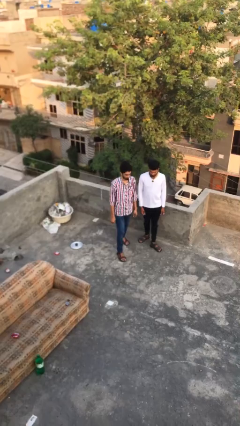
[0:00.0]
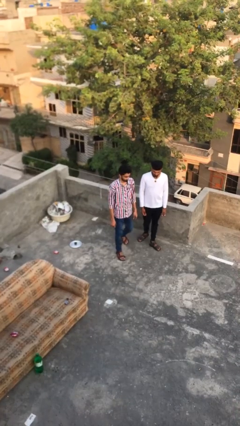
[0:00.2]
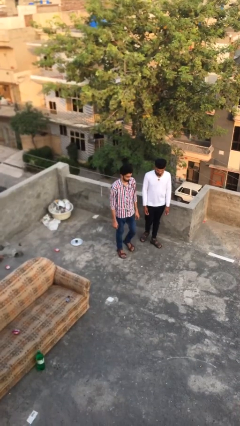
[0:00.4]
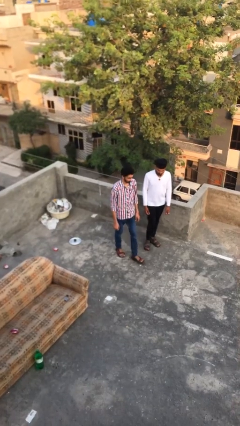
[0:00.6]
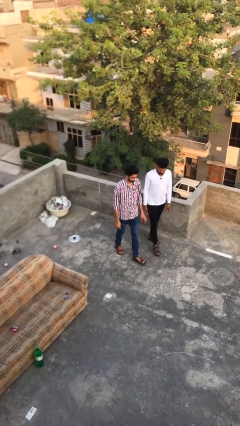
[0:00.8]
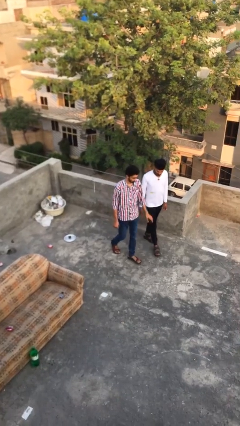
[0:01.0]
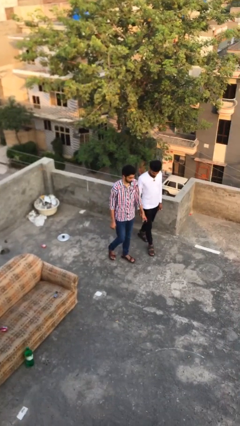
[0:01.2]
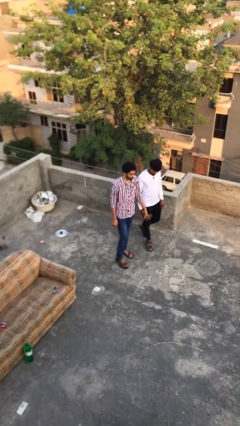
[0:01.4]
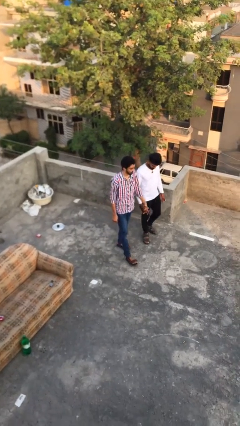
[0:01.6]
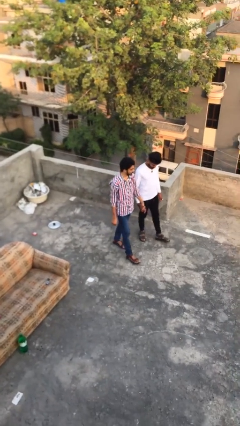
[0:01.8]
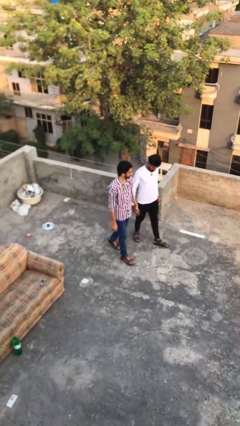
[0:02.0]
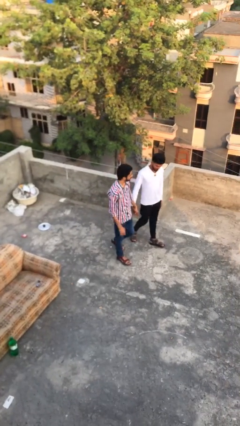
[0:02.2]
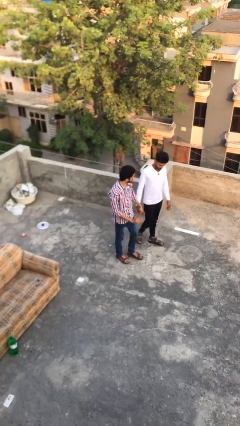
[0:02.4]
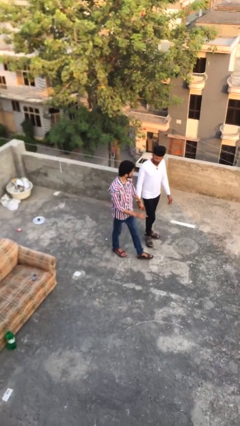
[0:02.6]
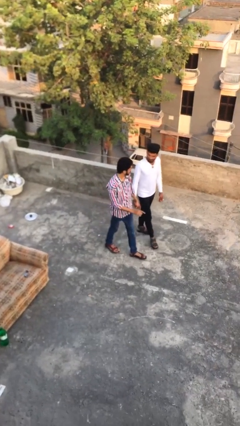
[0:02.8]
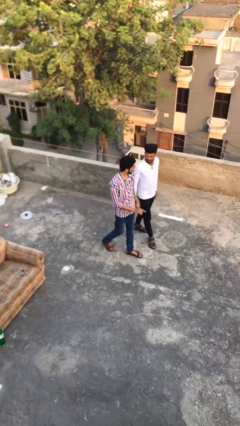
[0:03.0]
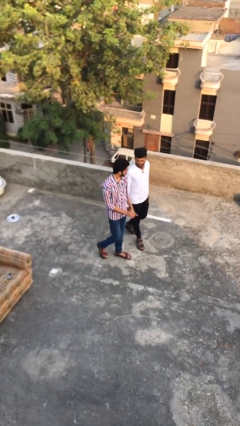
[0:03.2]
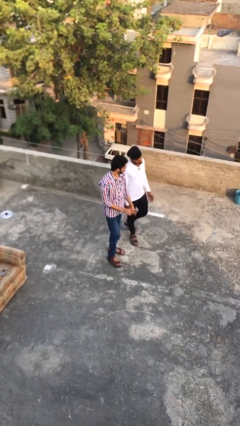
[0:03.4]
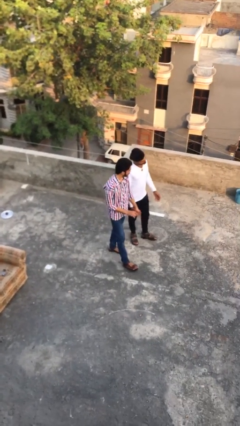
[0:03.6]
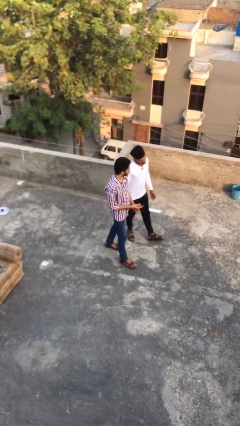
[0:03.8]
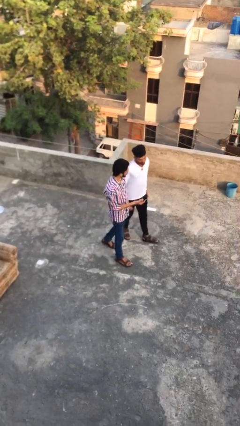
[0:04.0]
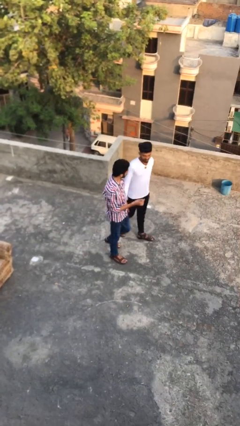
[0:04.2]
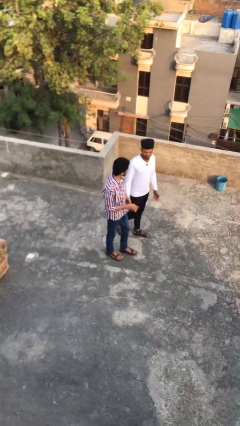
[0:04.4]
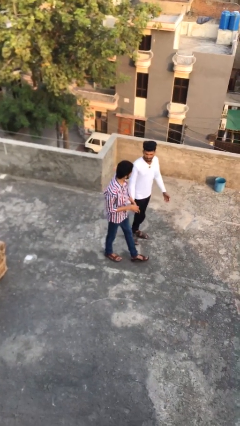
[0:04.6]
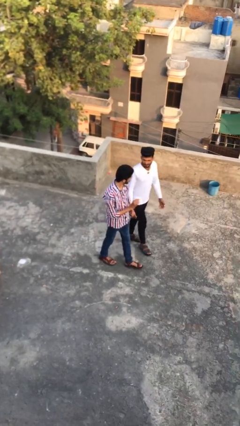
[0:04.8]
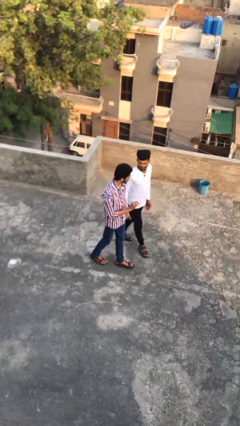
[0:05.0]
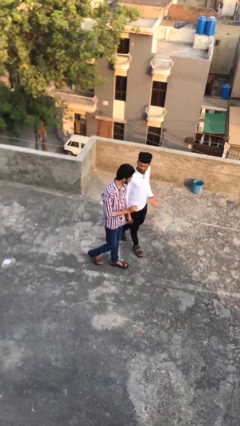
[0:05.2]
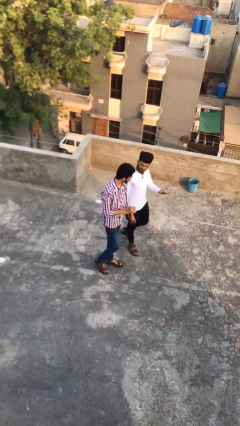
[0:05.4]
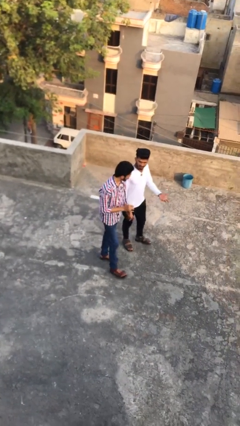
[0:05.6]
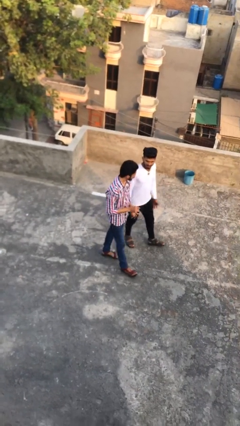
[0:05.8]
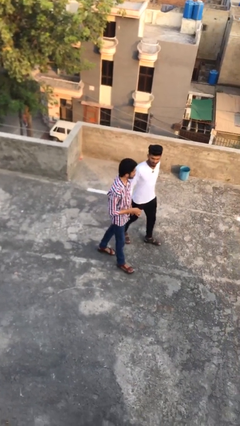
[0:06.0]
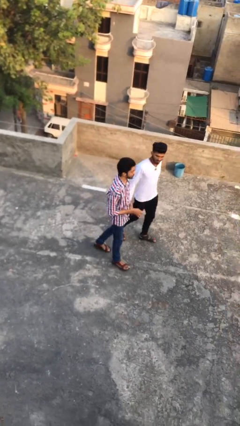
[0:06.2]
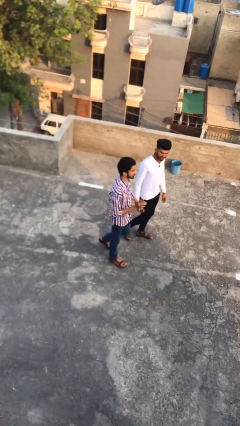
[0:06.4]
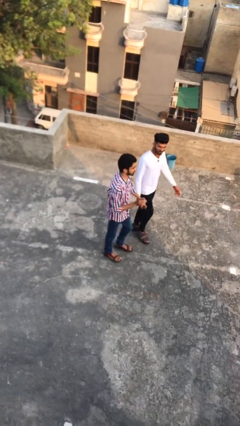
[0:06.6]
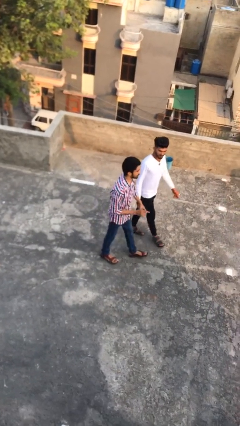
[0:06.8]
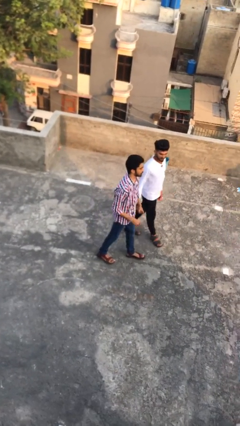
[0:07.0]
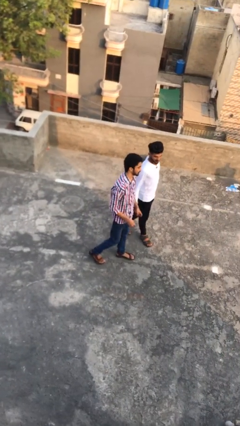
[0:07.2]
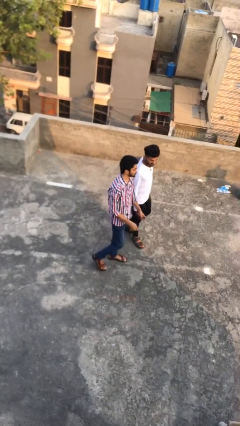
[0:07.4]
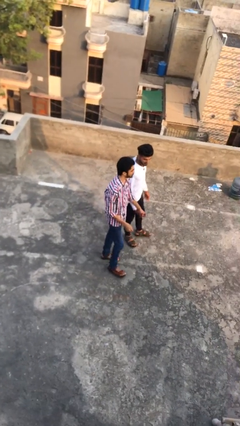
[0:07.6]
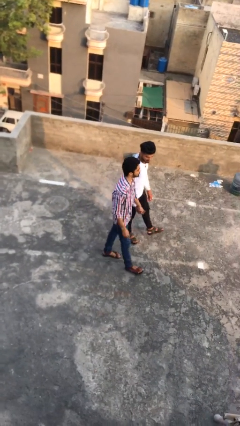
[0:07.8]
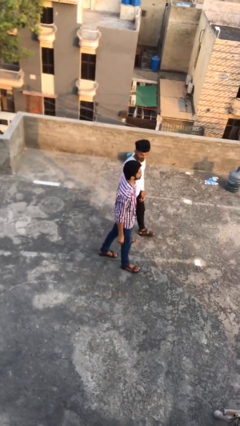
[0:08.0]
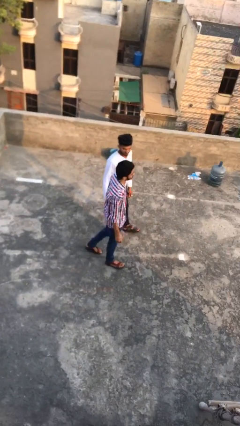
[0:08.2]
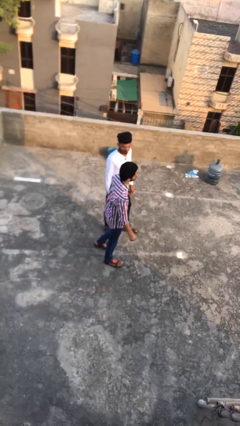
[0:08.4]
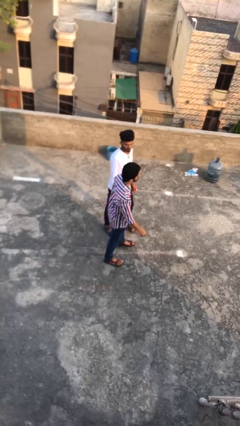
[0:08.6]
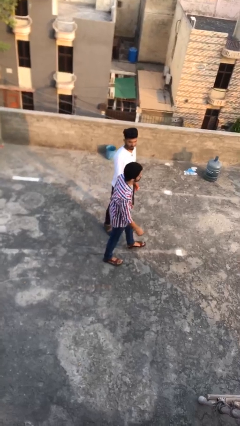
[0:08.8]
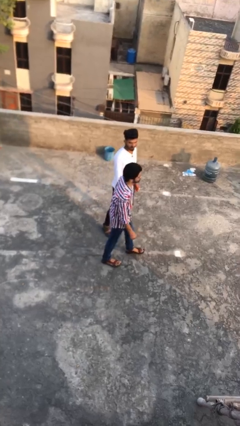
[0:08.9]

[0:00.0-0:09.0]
person holds hand

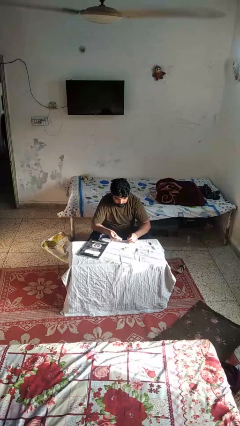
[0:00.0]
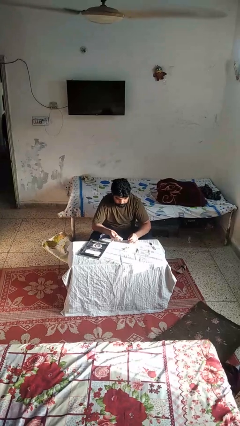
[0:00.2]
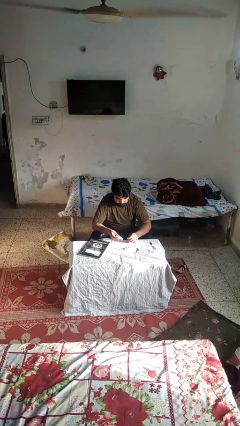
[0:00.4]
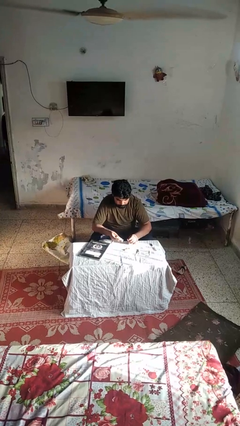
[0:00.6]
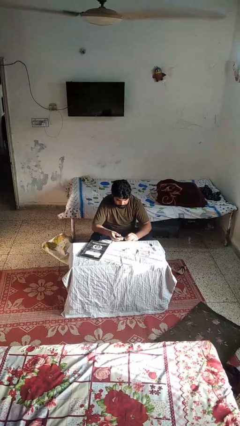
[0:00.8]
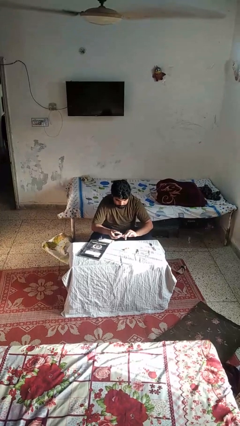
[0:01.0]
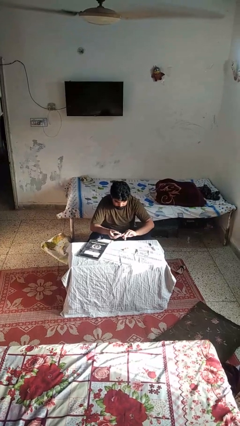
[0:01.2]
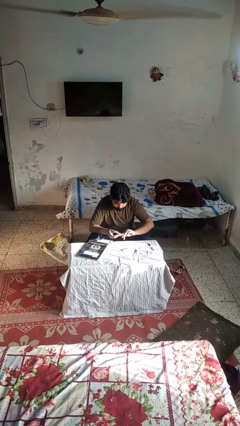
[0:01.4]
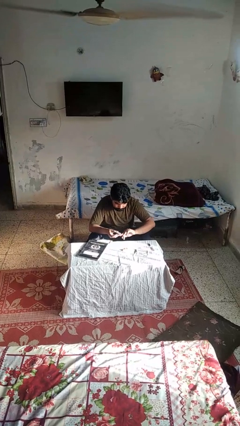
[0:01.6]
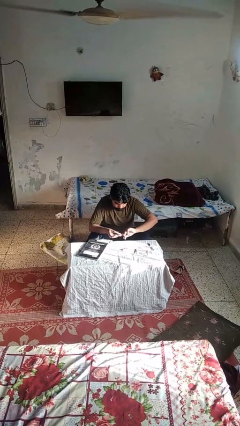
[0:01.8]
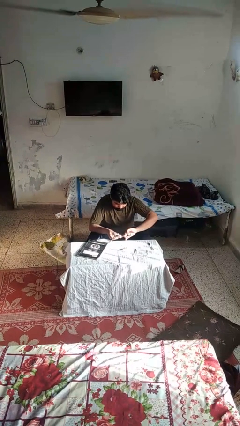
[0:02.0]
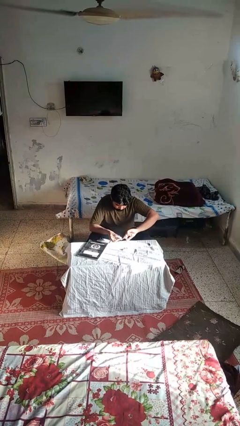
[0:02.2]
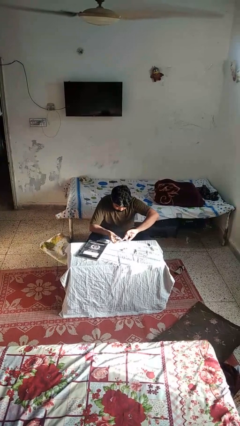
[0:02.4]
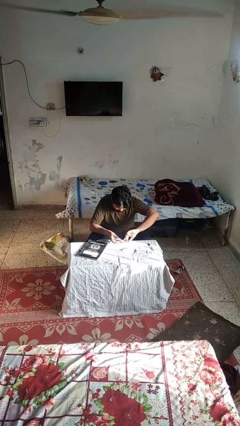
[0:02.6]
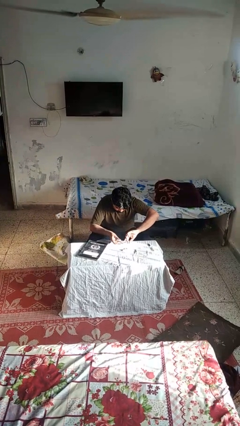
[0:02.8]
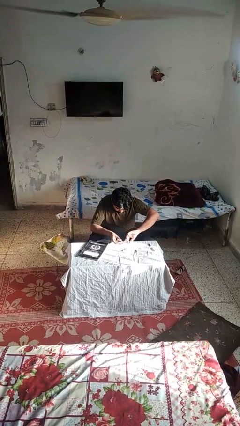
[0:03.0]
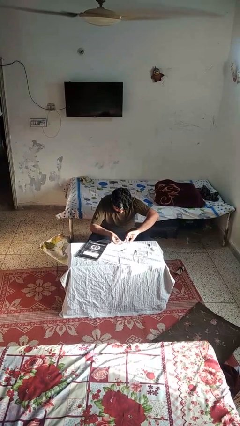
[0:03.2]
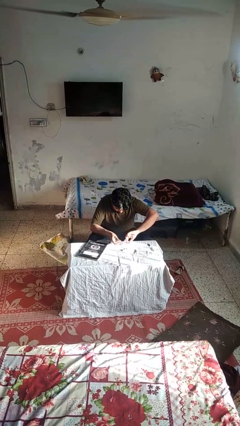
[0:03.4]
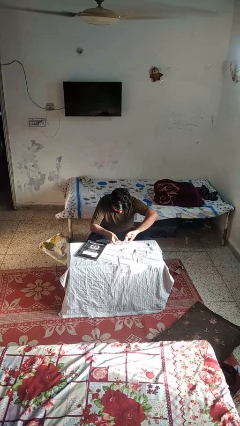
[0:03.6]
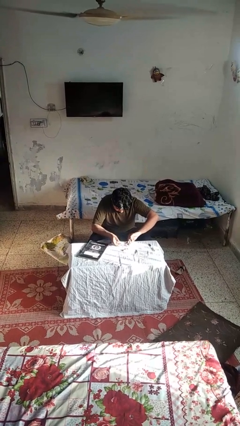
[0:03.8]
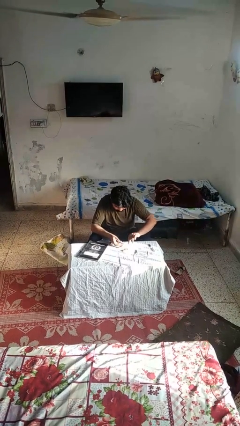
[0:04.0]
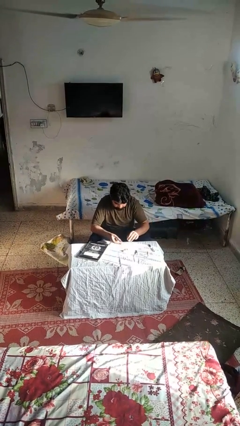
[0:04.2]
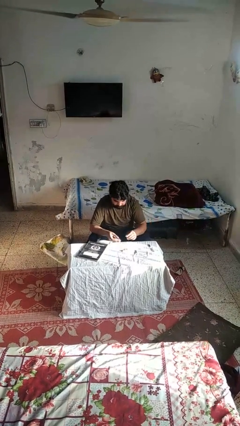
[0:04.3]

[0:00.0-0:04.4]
person clips fingernails

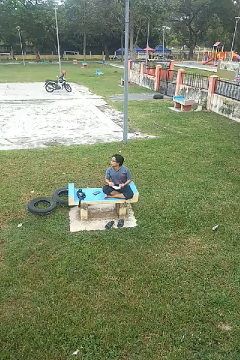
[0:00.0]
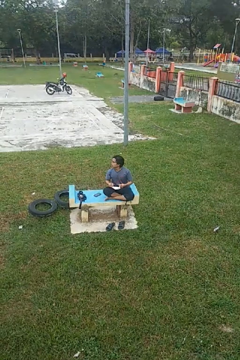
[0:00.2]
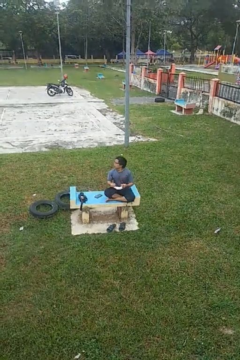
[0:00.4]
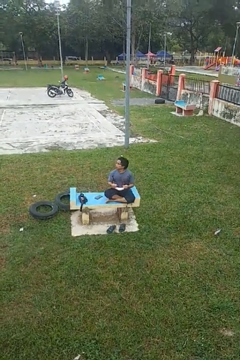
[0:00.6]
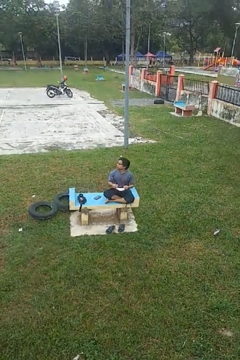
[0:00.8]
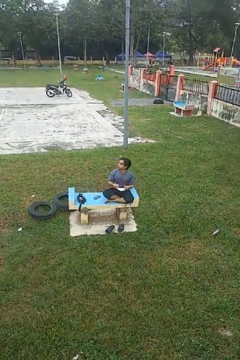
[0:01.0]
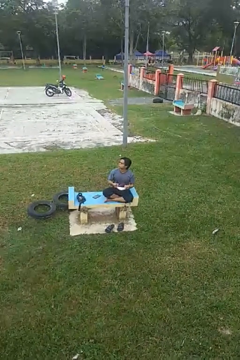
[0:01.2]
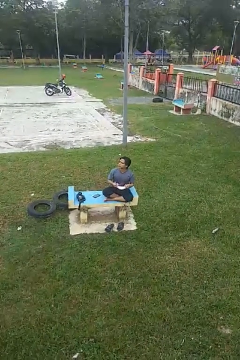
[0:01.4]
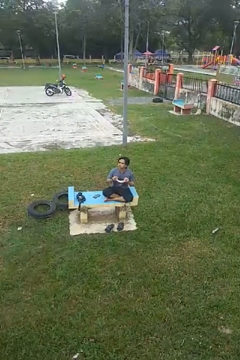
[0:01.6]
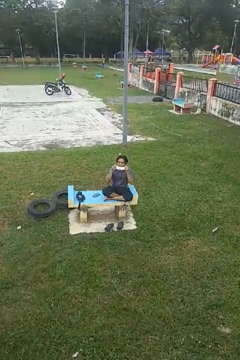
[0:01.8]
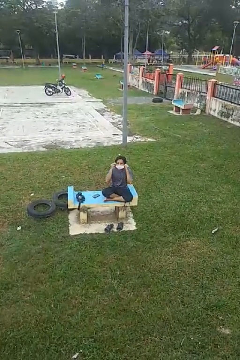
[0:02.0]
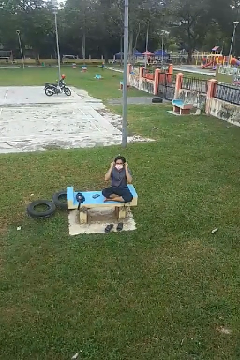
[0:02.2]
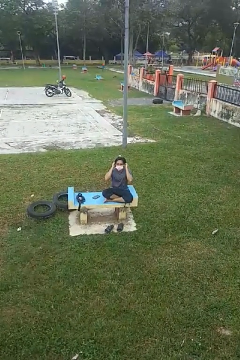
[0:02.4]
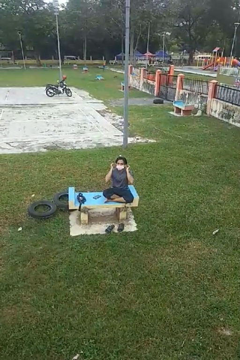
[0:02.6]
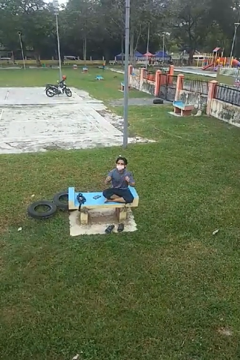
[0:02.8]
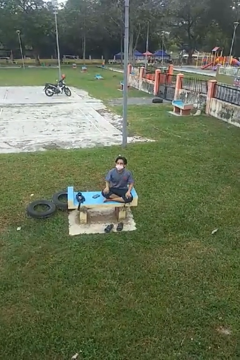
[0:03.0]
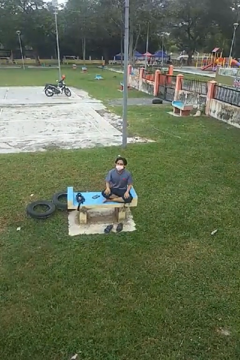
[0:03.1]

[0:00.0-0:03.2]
person puts on facemask

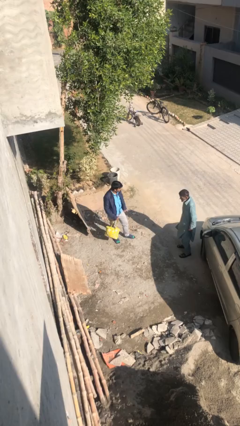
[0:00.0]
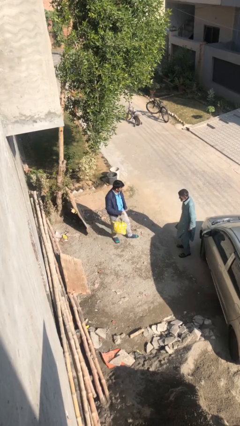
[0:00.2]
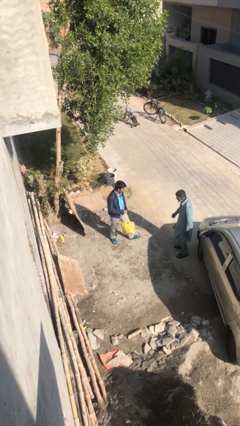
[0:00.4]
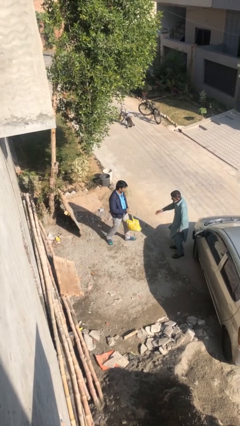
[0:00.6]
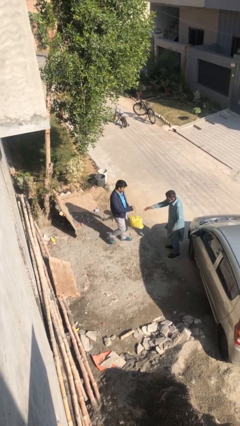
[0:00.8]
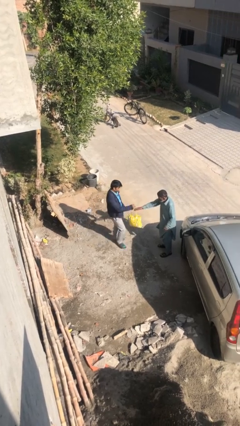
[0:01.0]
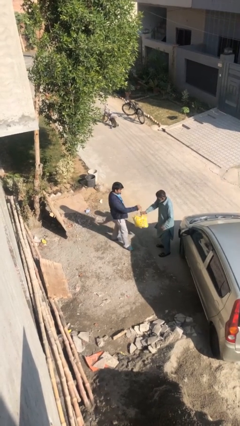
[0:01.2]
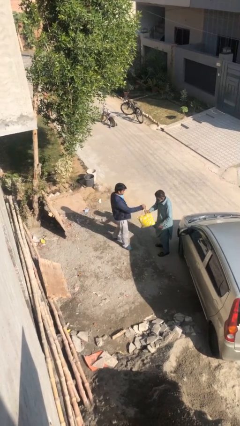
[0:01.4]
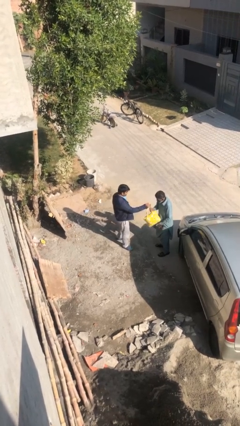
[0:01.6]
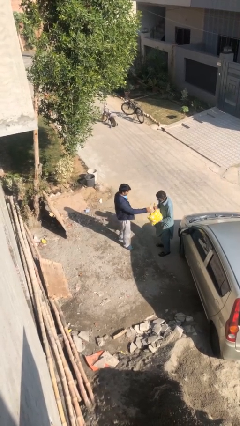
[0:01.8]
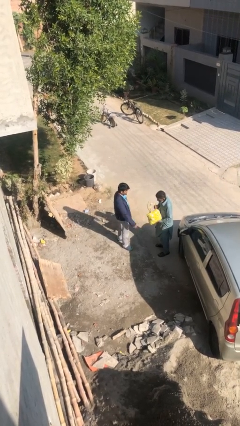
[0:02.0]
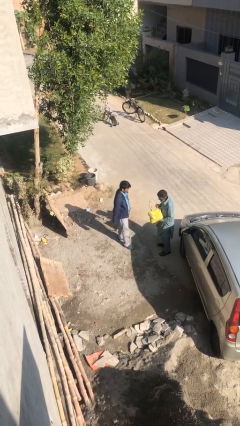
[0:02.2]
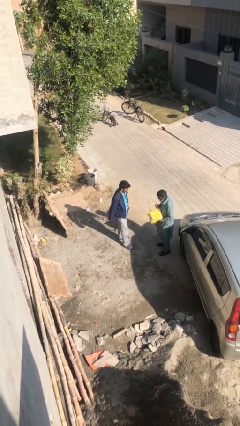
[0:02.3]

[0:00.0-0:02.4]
person transfers object to person
